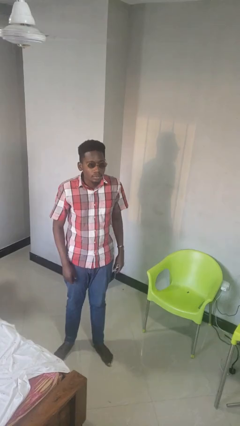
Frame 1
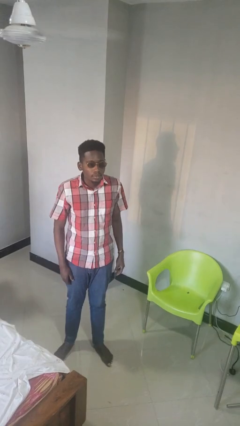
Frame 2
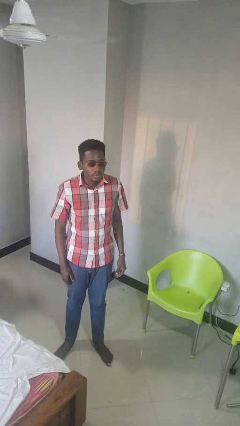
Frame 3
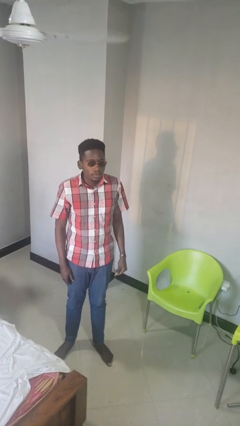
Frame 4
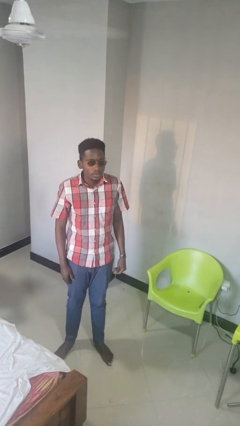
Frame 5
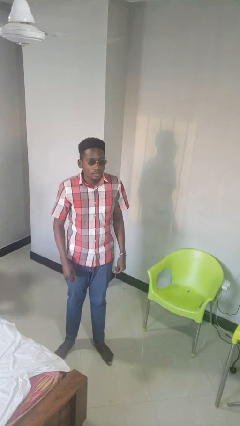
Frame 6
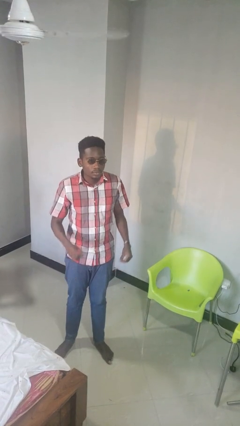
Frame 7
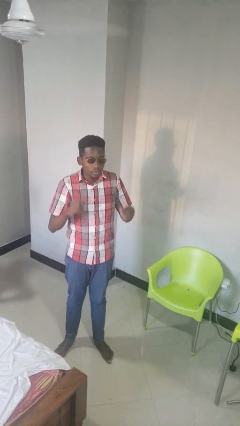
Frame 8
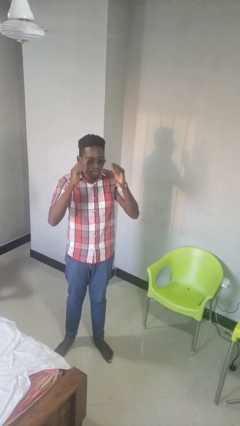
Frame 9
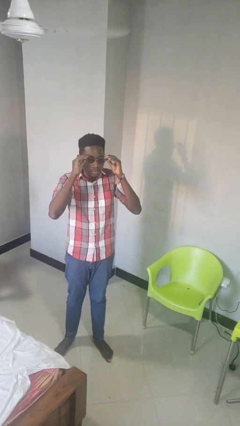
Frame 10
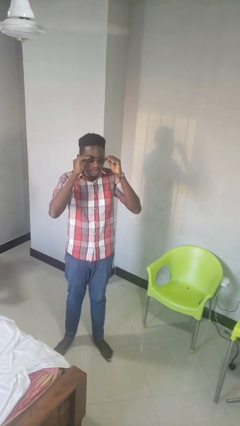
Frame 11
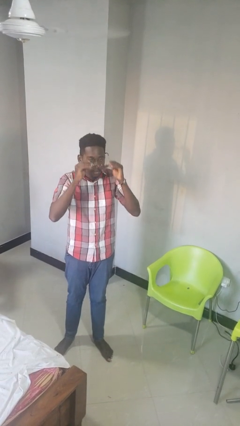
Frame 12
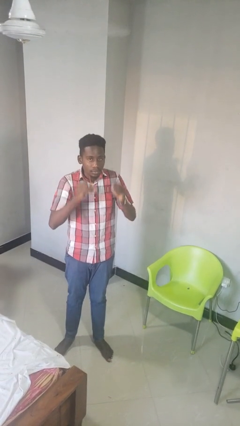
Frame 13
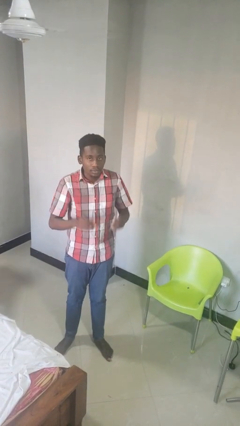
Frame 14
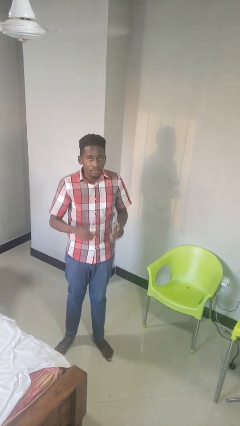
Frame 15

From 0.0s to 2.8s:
person takes off sunglasses

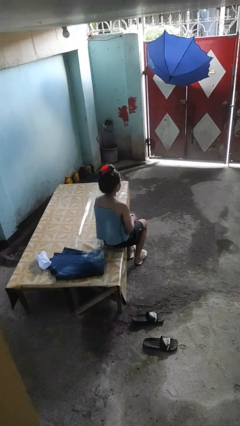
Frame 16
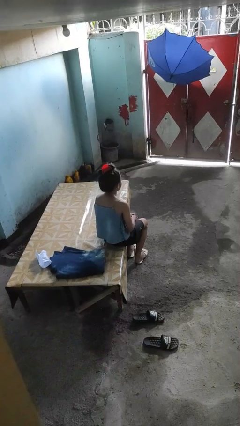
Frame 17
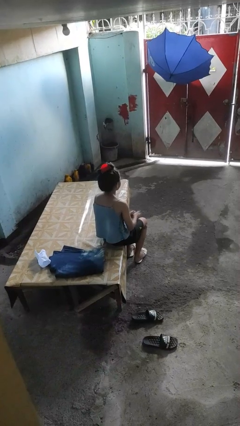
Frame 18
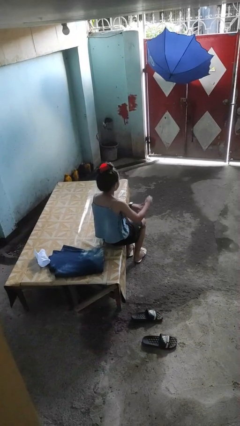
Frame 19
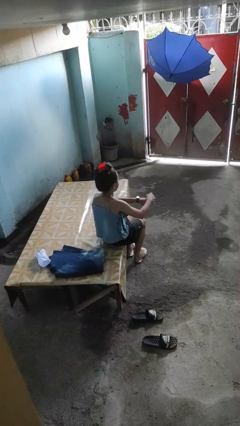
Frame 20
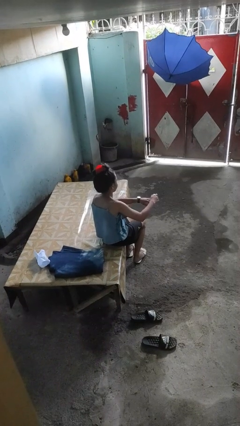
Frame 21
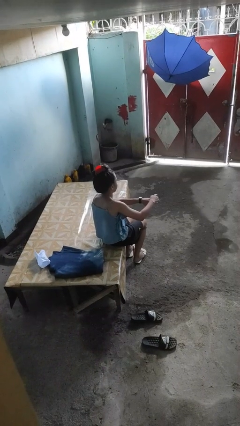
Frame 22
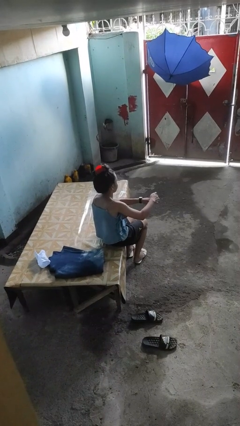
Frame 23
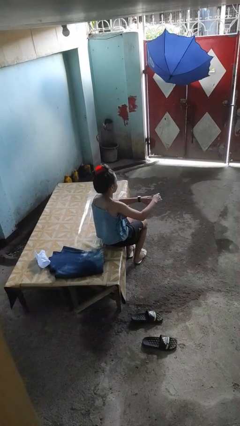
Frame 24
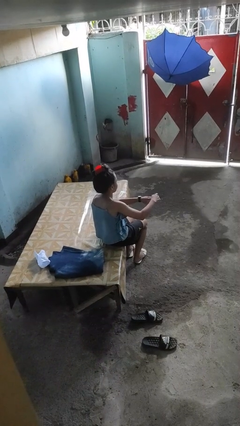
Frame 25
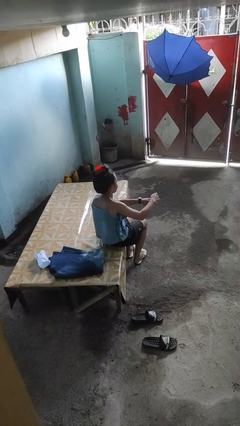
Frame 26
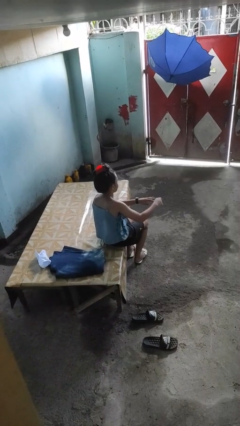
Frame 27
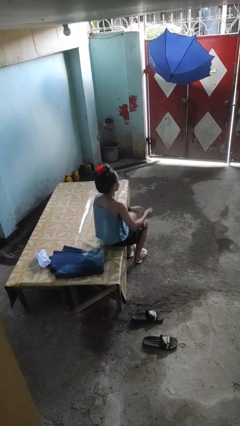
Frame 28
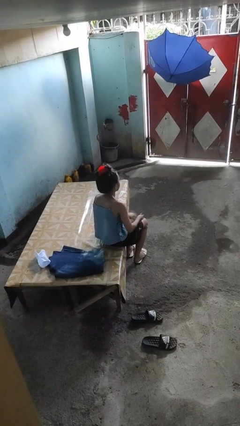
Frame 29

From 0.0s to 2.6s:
person clips fingernails

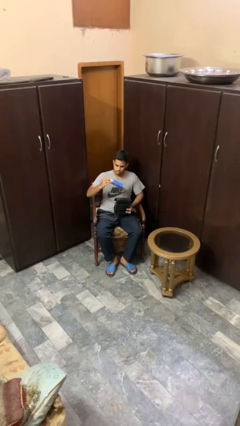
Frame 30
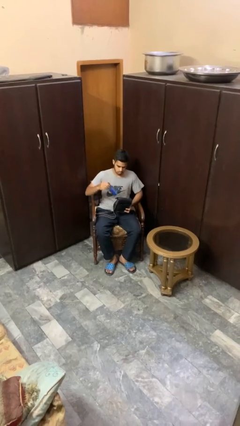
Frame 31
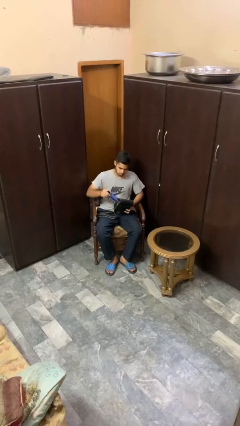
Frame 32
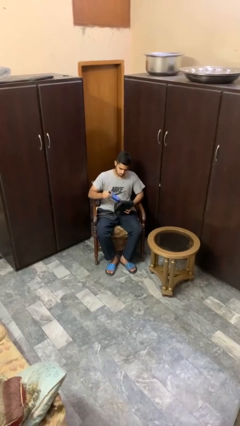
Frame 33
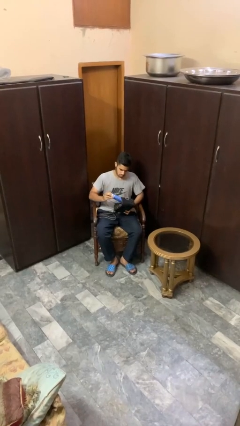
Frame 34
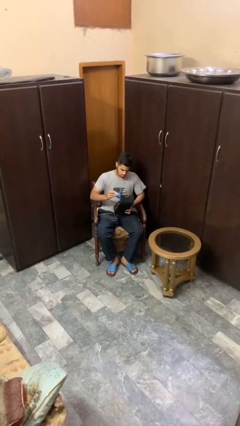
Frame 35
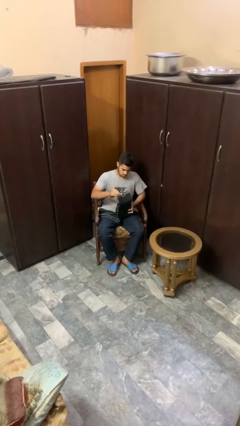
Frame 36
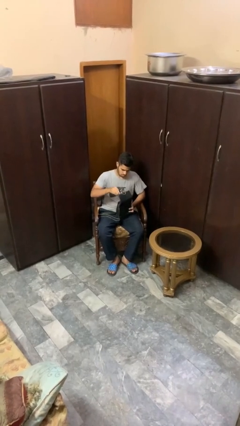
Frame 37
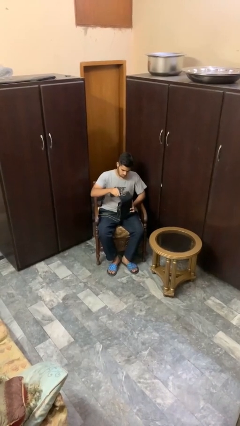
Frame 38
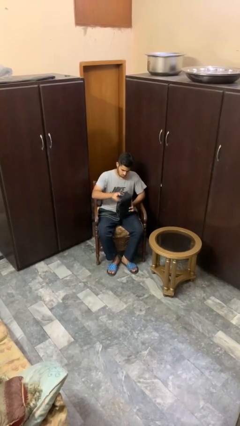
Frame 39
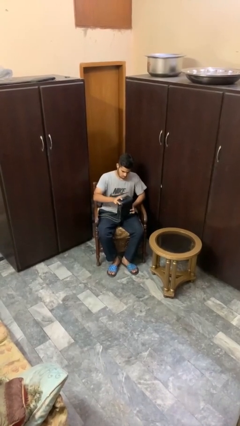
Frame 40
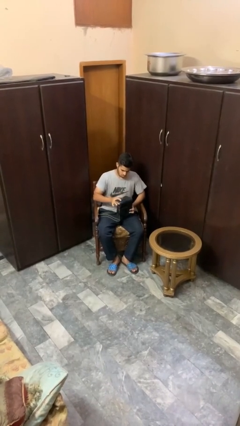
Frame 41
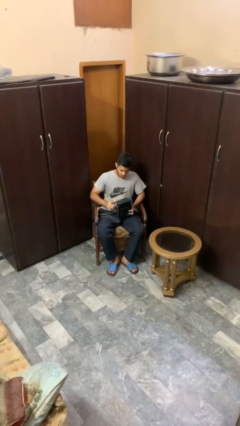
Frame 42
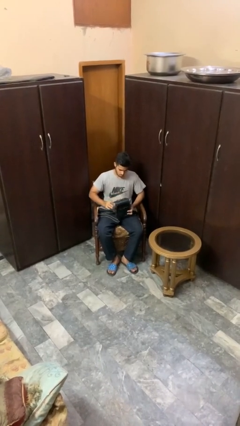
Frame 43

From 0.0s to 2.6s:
person puts object into purse

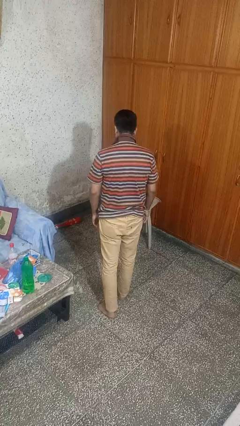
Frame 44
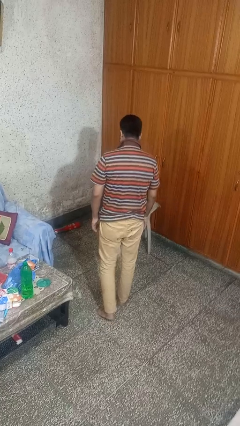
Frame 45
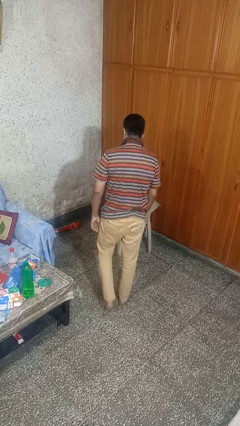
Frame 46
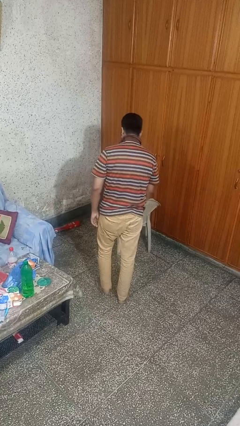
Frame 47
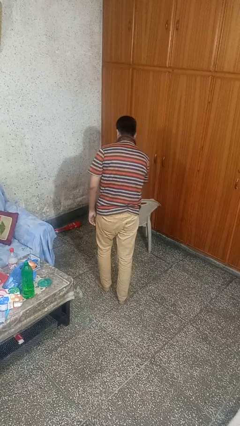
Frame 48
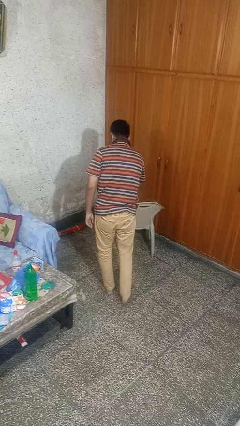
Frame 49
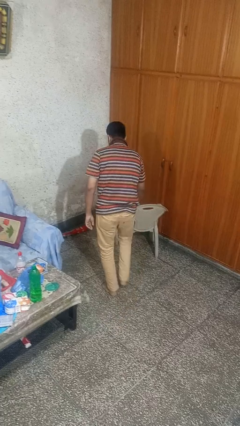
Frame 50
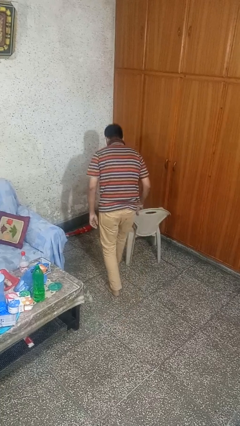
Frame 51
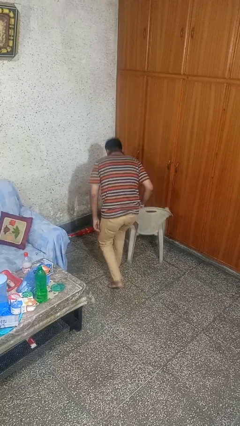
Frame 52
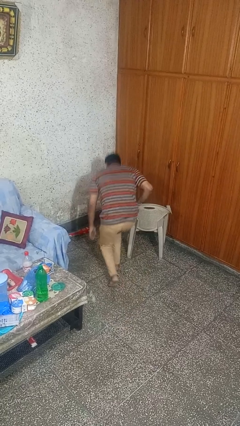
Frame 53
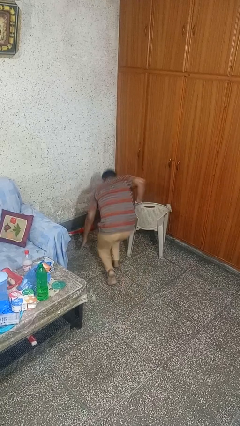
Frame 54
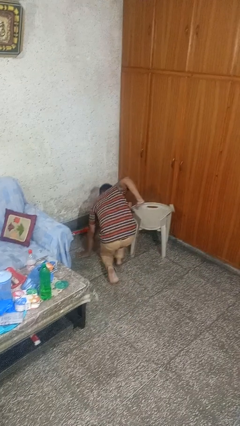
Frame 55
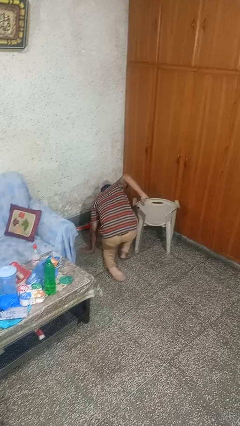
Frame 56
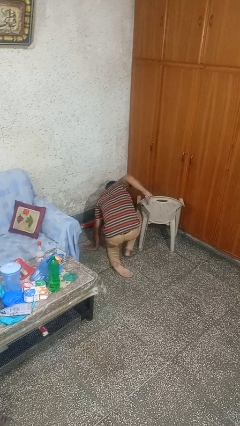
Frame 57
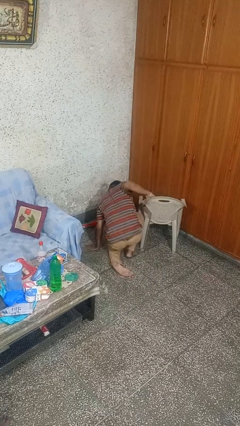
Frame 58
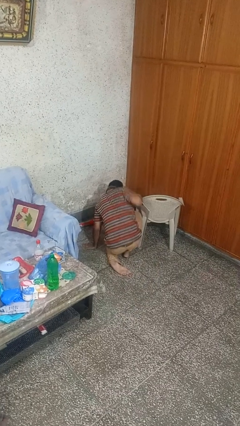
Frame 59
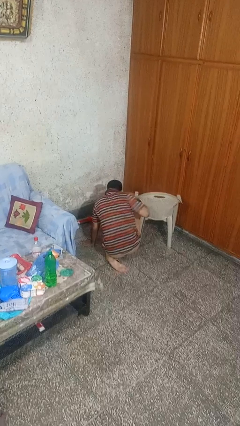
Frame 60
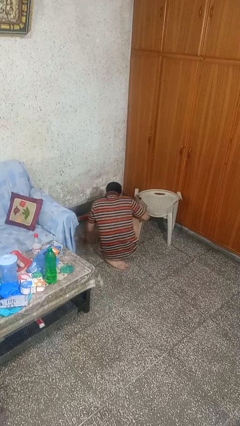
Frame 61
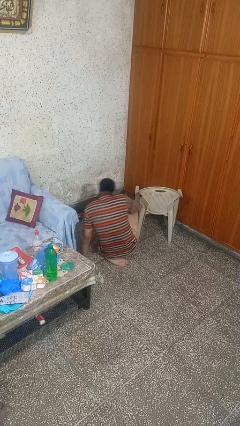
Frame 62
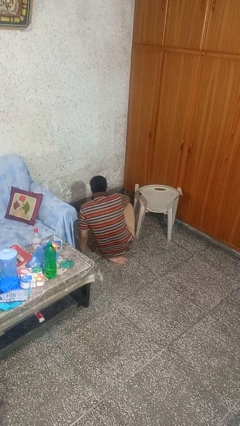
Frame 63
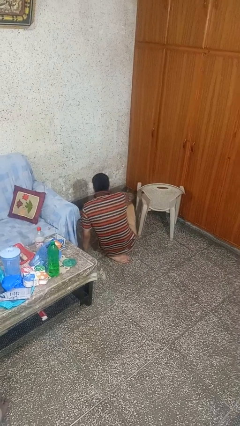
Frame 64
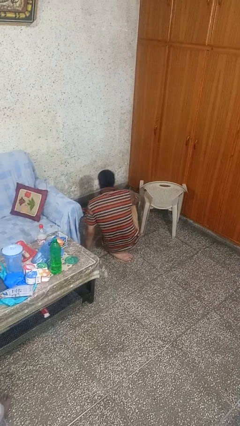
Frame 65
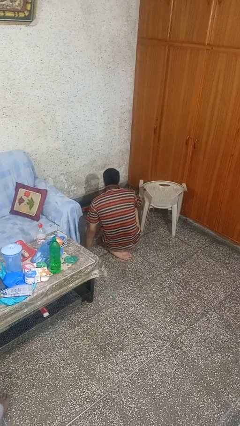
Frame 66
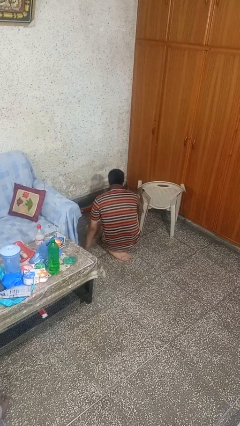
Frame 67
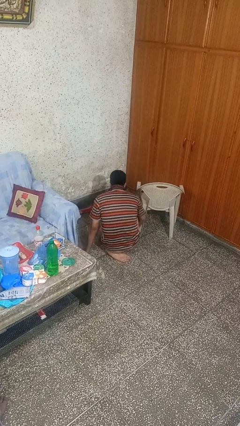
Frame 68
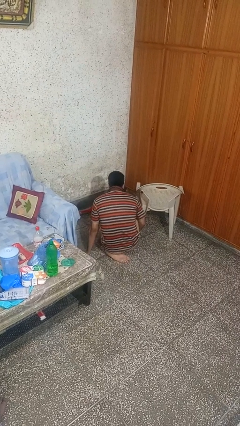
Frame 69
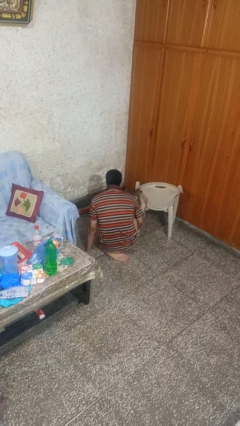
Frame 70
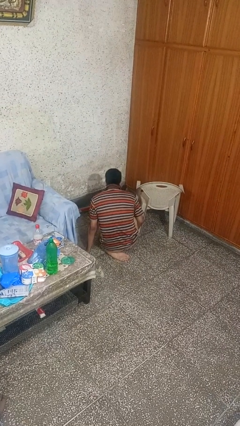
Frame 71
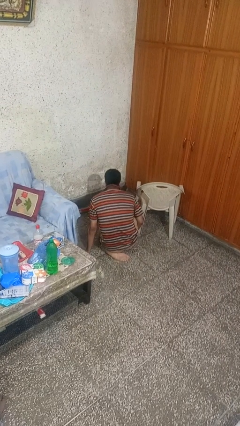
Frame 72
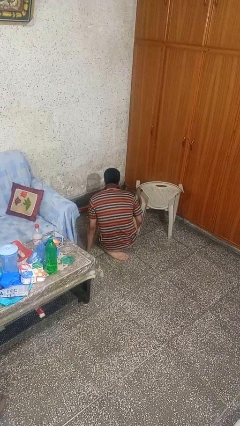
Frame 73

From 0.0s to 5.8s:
person trips on object on floor

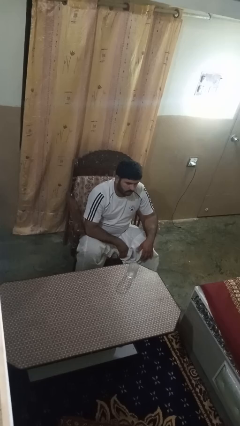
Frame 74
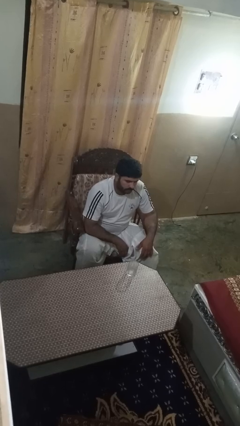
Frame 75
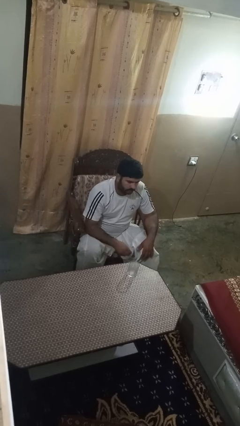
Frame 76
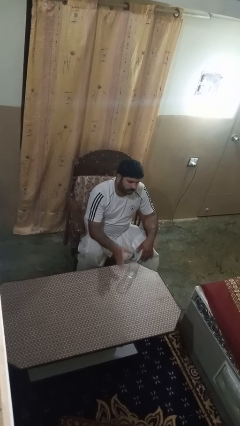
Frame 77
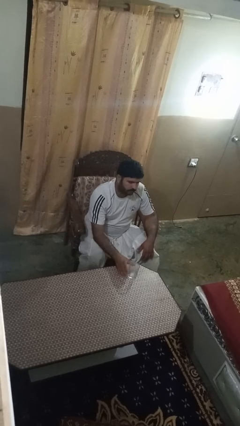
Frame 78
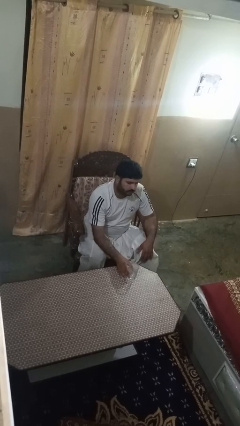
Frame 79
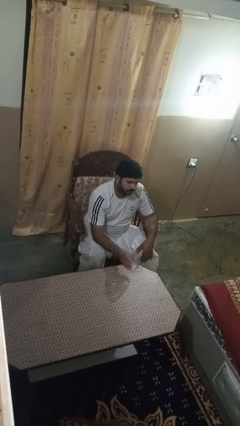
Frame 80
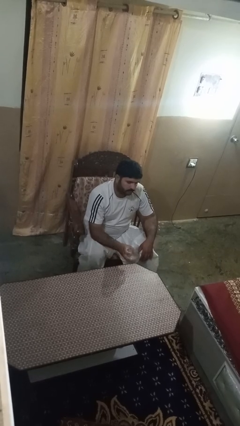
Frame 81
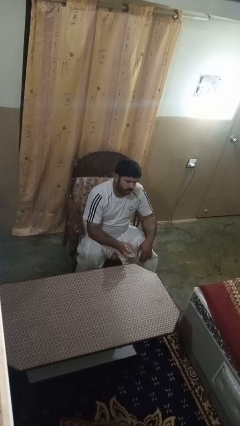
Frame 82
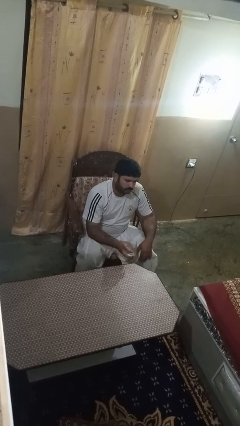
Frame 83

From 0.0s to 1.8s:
person picks up object from table

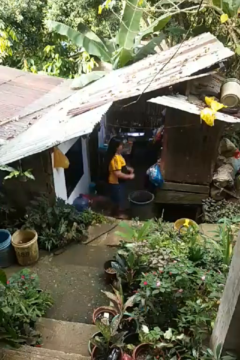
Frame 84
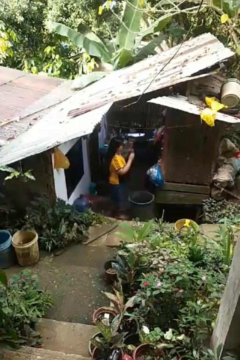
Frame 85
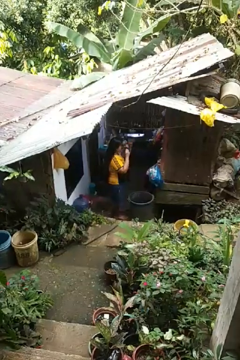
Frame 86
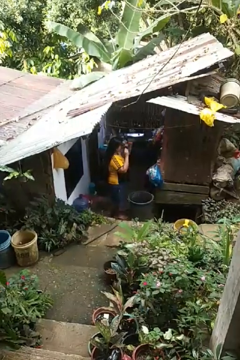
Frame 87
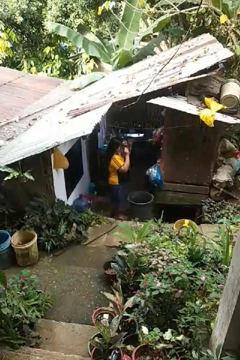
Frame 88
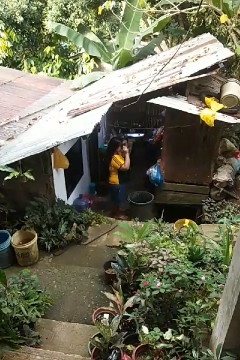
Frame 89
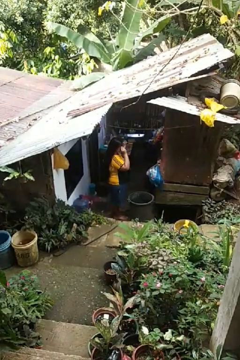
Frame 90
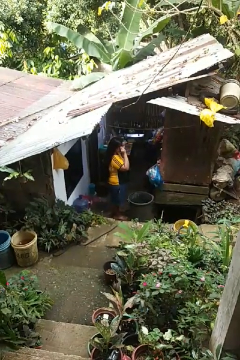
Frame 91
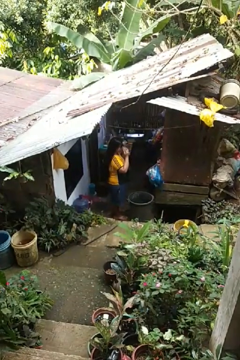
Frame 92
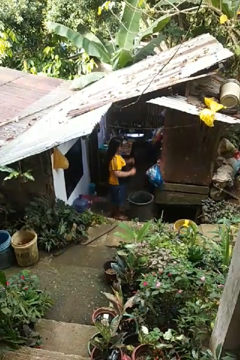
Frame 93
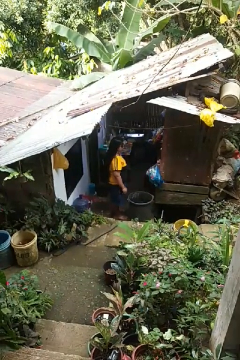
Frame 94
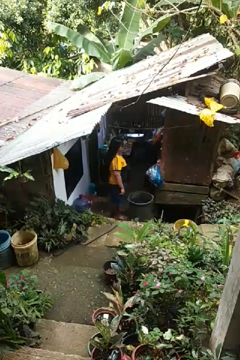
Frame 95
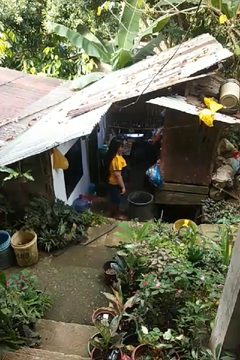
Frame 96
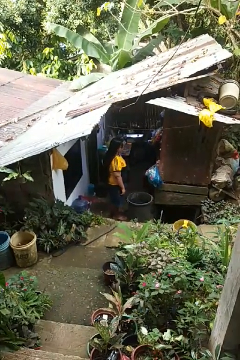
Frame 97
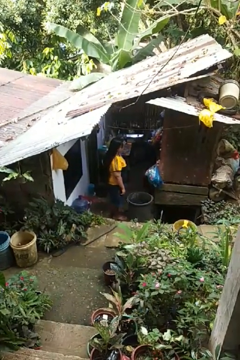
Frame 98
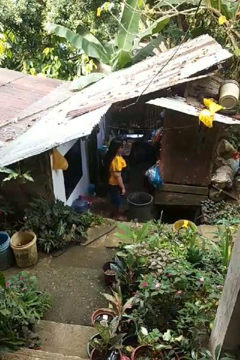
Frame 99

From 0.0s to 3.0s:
person puts on sunglasses
